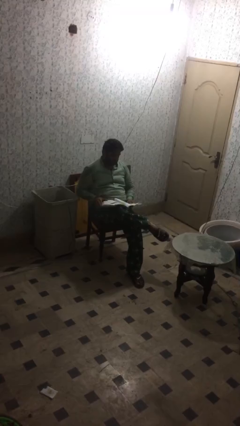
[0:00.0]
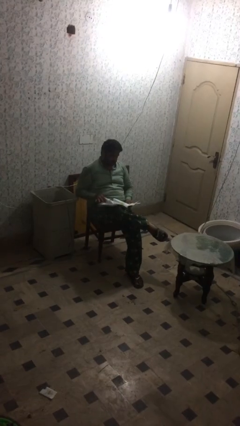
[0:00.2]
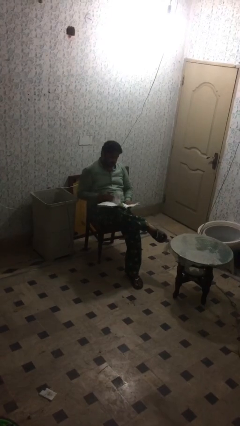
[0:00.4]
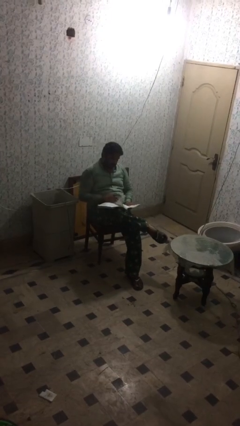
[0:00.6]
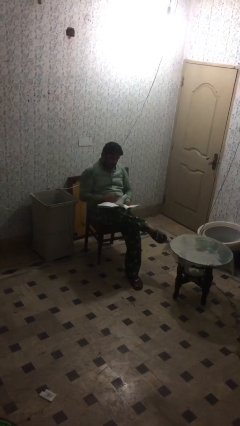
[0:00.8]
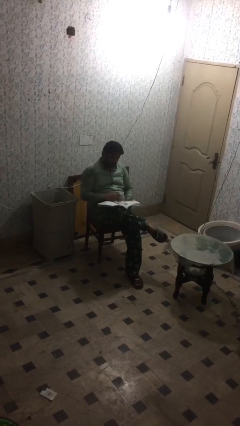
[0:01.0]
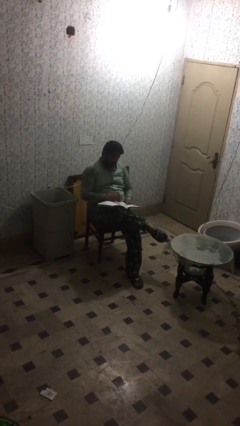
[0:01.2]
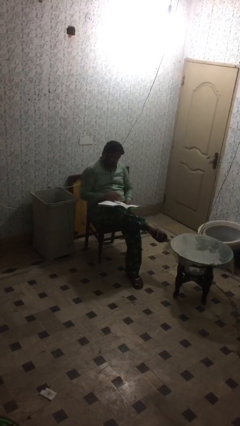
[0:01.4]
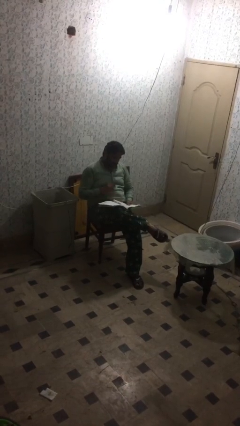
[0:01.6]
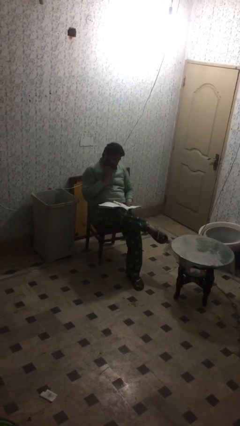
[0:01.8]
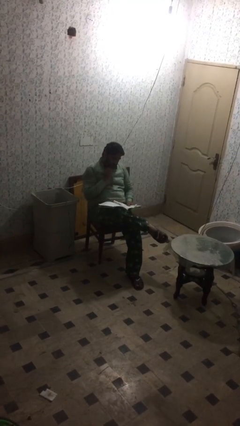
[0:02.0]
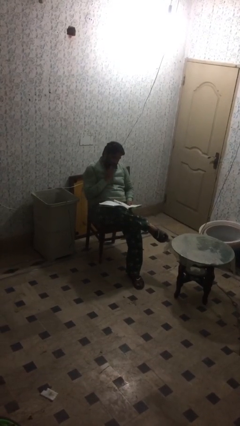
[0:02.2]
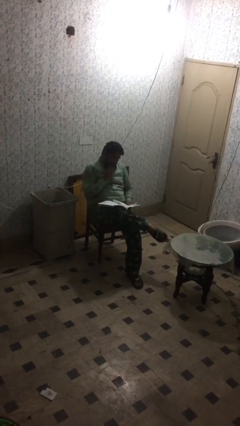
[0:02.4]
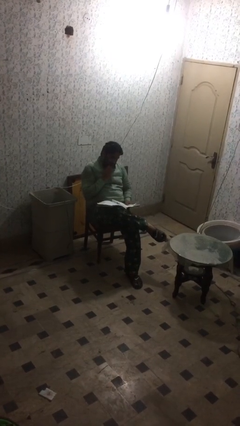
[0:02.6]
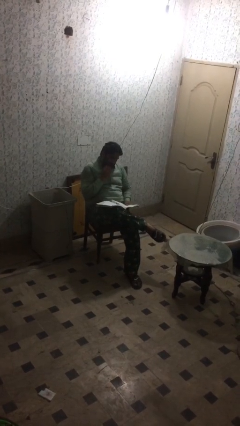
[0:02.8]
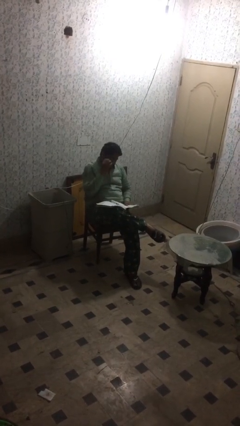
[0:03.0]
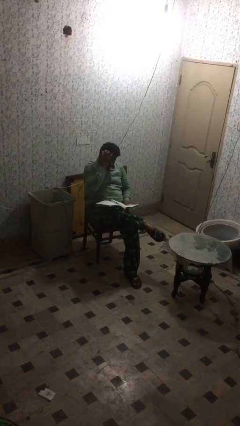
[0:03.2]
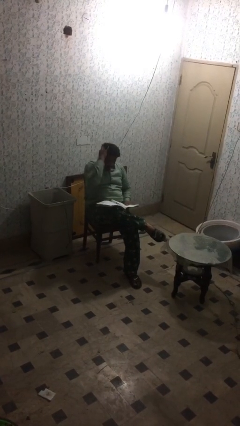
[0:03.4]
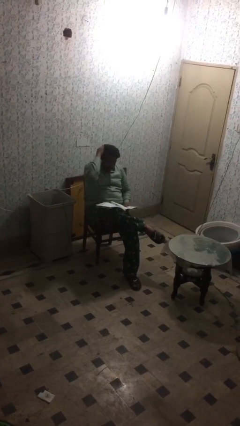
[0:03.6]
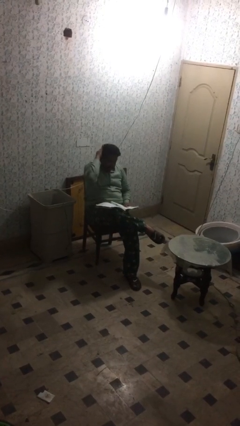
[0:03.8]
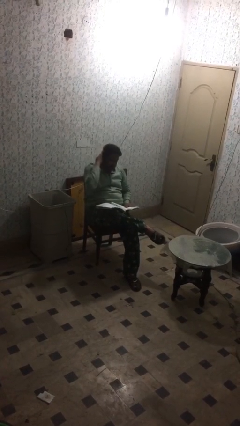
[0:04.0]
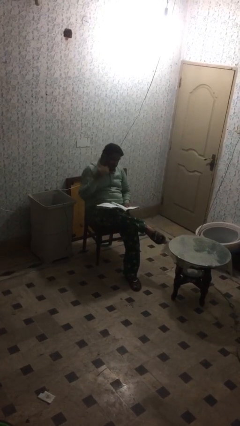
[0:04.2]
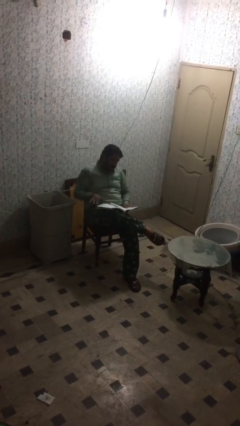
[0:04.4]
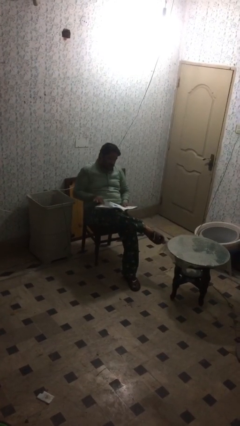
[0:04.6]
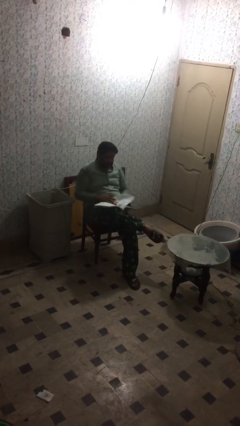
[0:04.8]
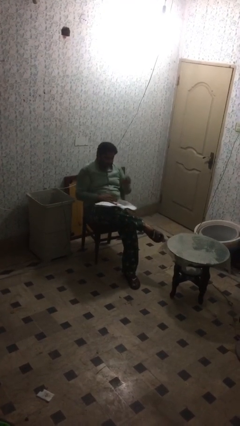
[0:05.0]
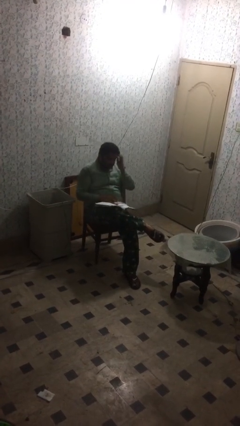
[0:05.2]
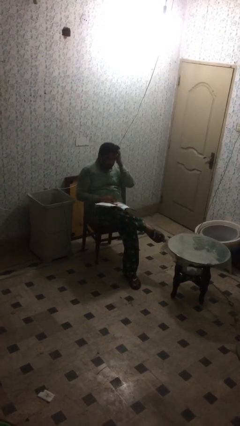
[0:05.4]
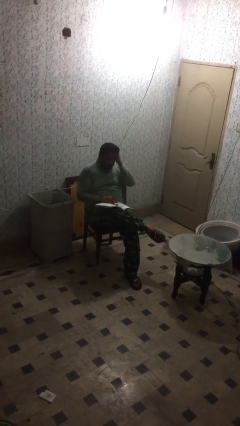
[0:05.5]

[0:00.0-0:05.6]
person reads document

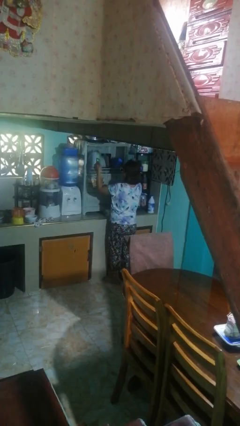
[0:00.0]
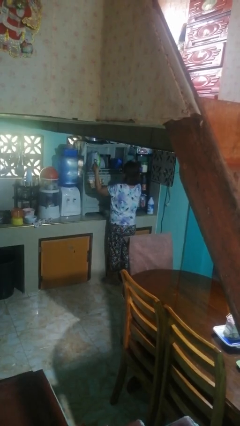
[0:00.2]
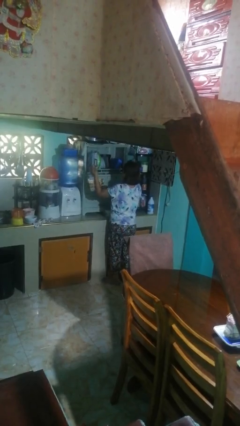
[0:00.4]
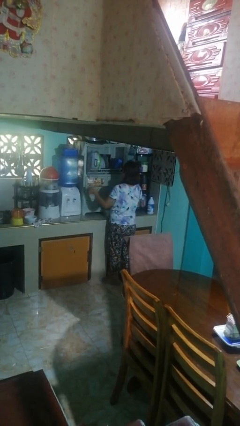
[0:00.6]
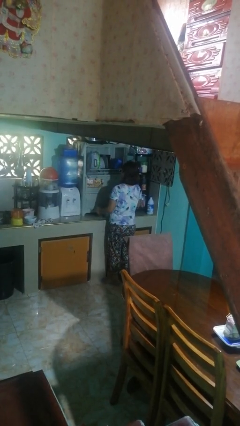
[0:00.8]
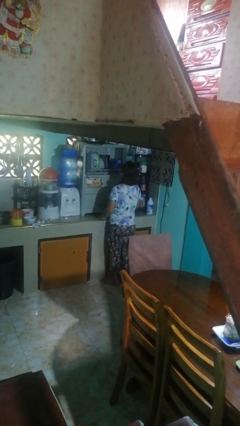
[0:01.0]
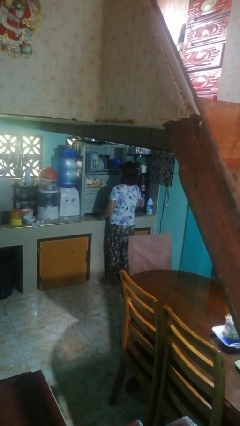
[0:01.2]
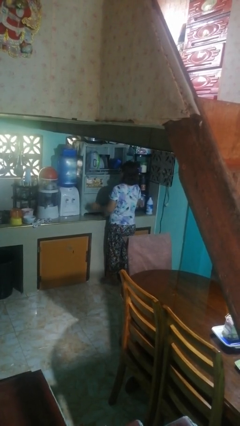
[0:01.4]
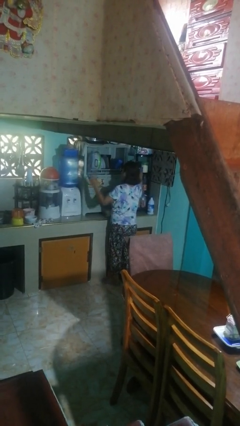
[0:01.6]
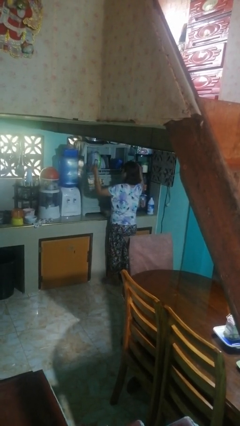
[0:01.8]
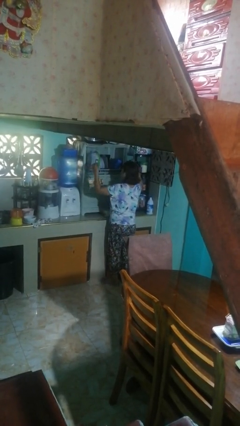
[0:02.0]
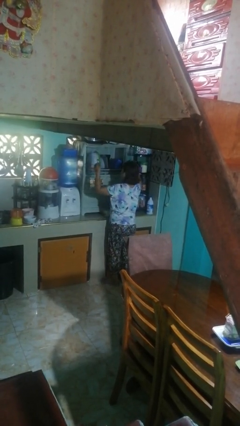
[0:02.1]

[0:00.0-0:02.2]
person closes curtains

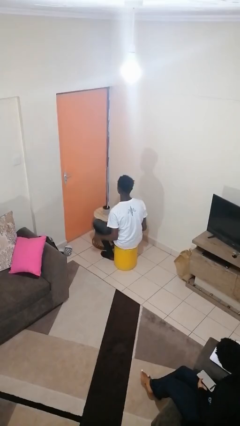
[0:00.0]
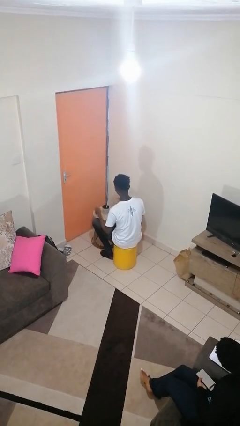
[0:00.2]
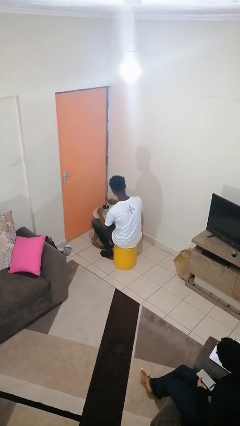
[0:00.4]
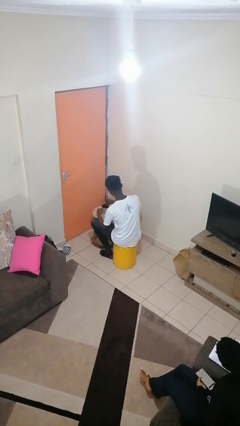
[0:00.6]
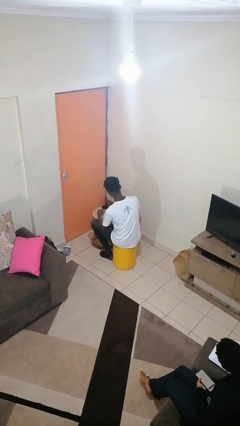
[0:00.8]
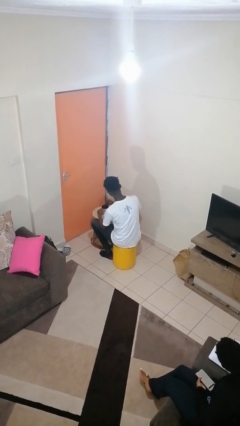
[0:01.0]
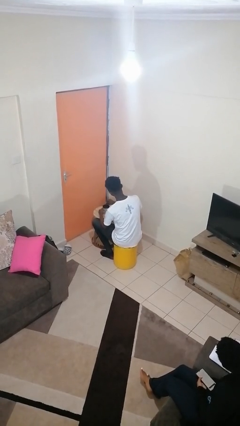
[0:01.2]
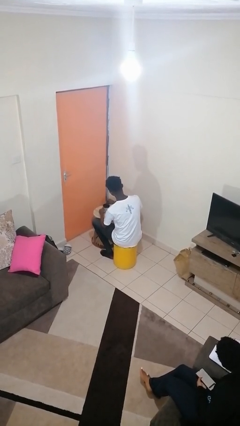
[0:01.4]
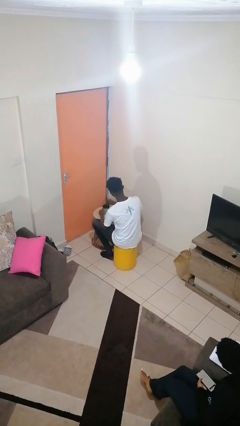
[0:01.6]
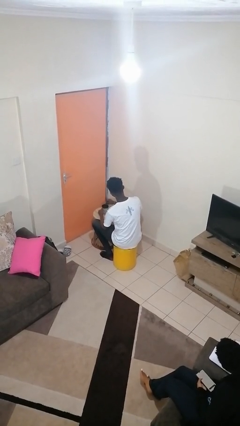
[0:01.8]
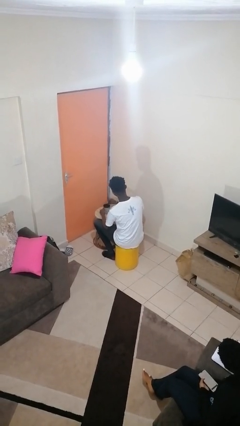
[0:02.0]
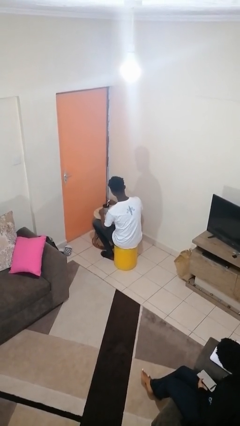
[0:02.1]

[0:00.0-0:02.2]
person stirs mug

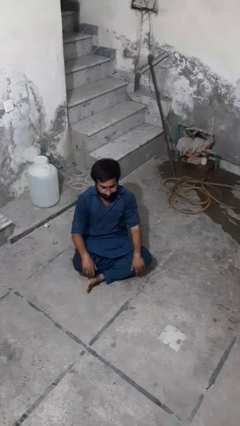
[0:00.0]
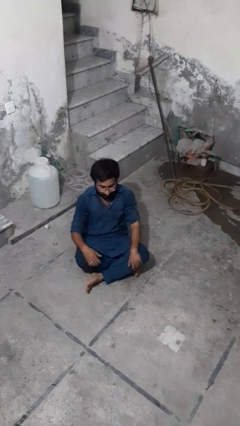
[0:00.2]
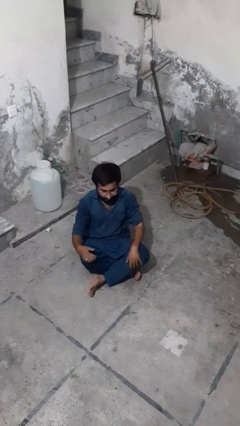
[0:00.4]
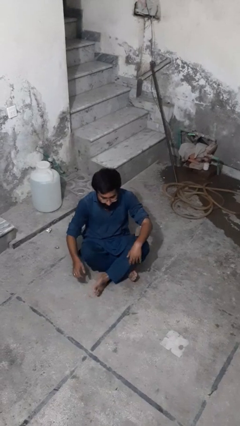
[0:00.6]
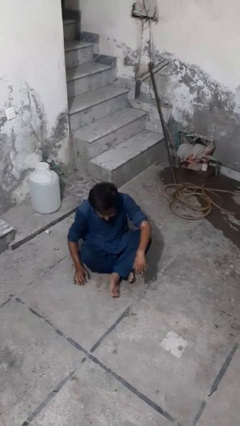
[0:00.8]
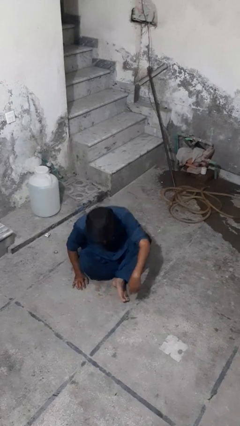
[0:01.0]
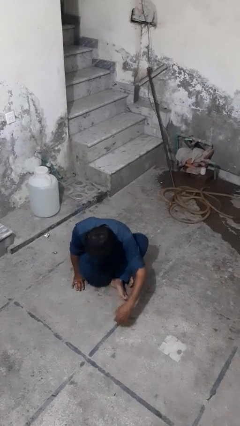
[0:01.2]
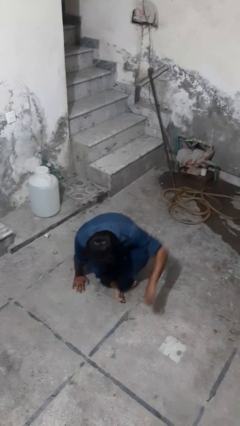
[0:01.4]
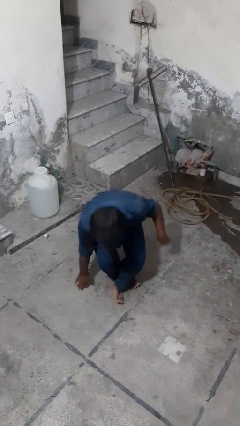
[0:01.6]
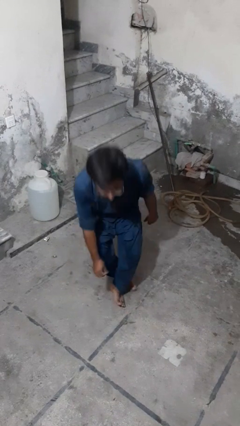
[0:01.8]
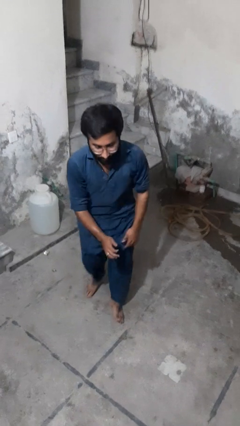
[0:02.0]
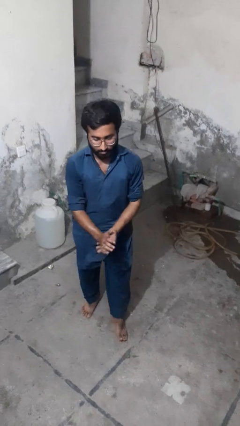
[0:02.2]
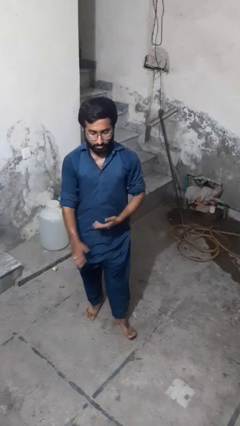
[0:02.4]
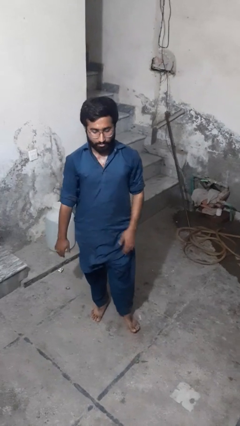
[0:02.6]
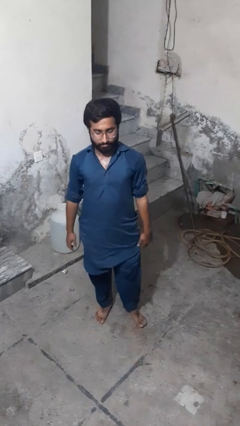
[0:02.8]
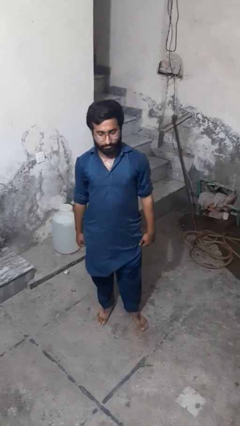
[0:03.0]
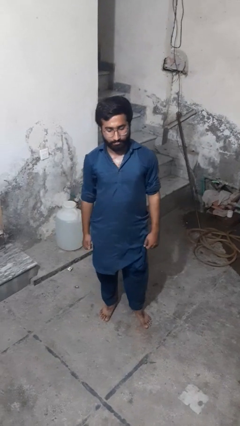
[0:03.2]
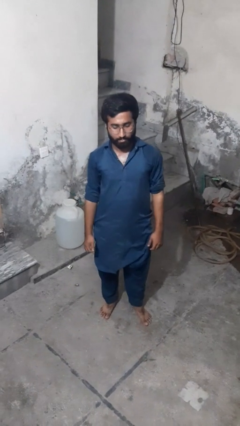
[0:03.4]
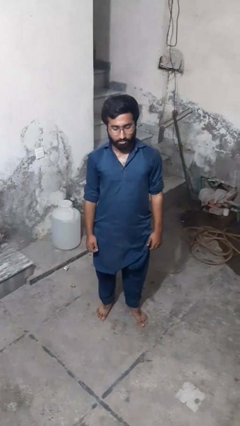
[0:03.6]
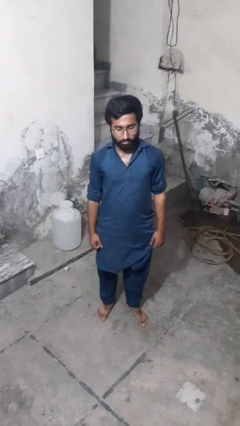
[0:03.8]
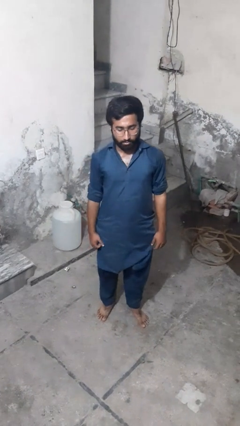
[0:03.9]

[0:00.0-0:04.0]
person stands up from floor

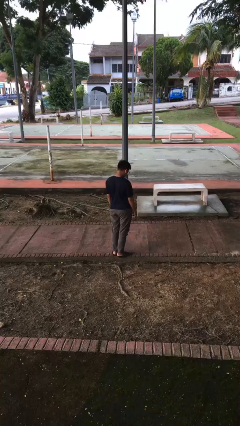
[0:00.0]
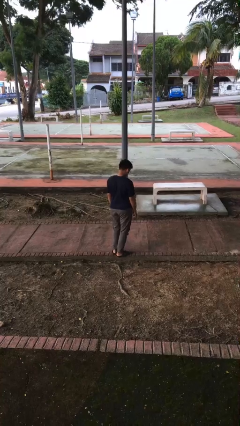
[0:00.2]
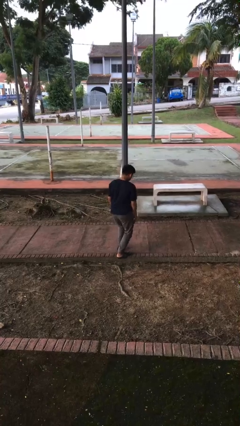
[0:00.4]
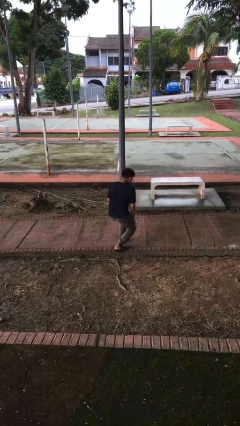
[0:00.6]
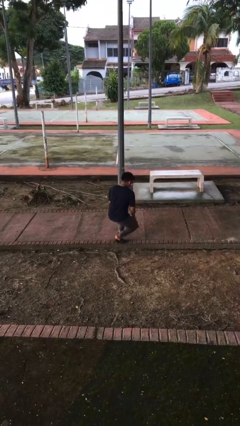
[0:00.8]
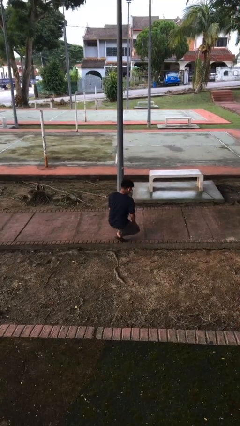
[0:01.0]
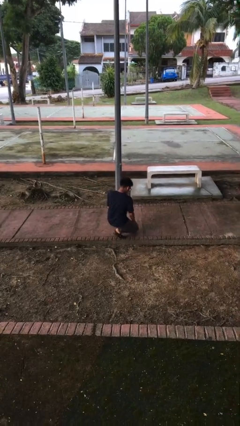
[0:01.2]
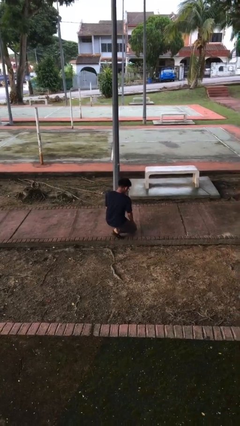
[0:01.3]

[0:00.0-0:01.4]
person kneels

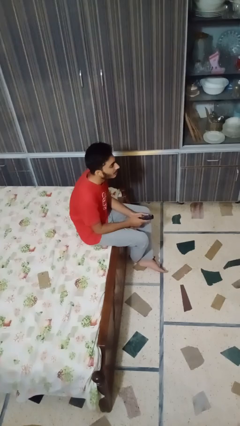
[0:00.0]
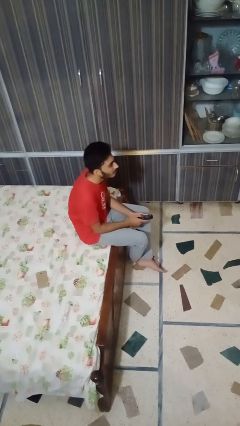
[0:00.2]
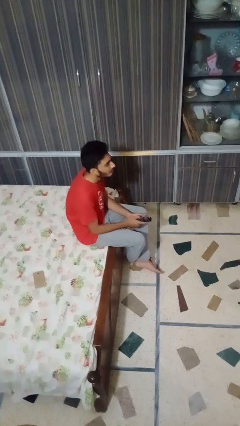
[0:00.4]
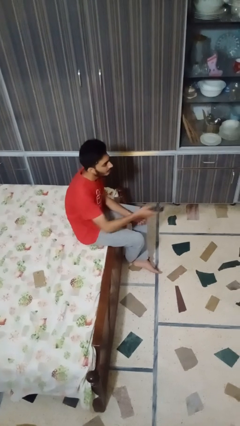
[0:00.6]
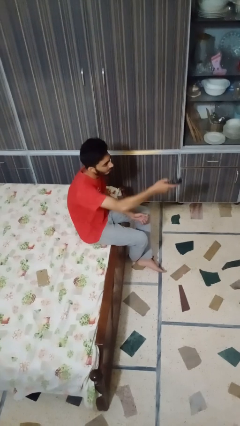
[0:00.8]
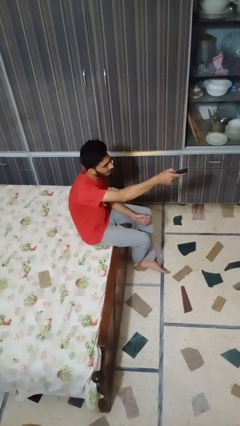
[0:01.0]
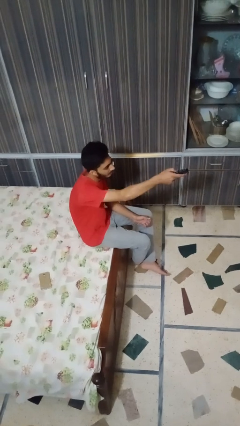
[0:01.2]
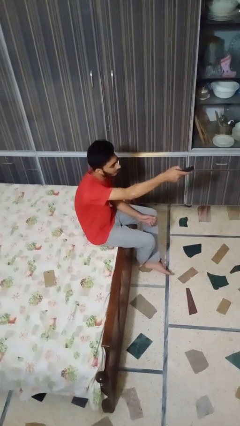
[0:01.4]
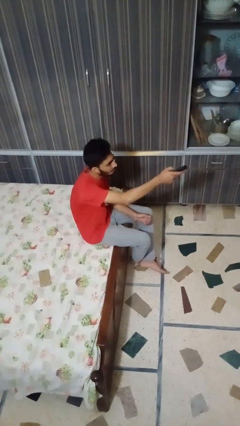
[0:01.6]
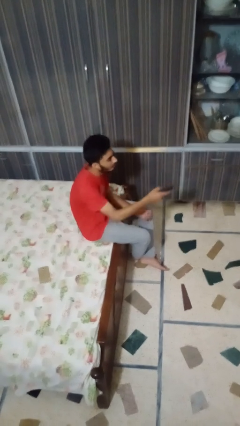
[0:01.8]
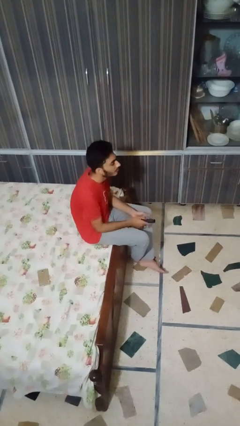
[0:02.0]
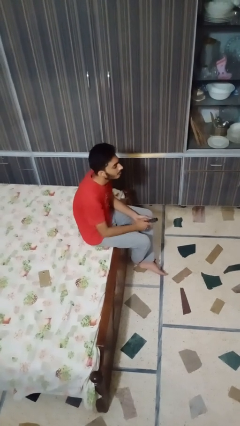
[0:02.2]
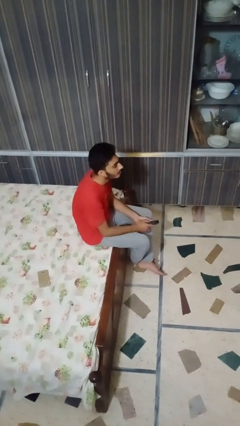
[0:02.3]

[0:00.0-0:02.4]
person uses television remote
